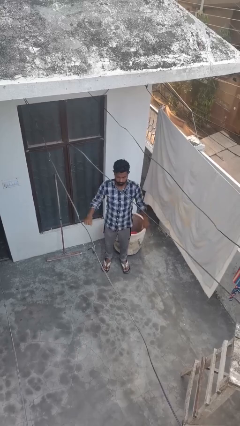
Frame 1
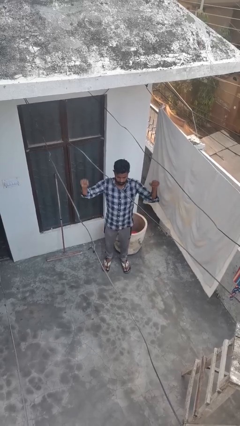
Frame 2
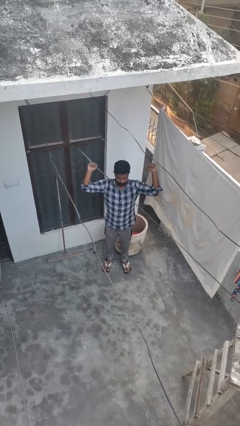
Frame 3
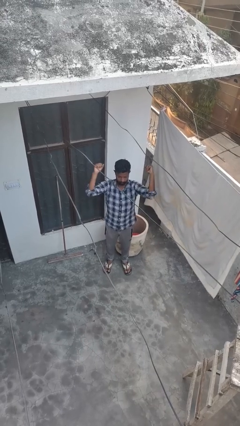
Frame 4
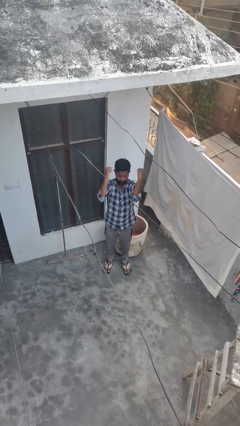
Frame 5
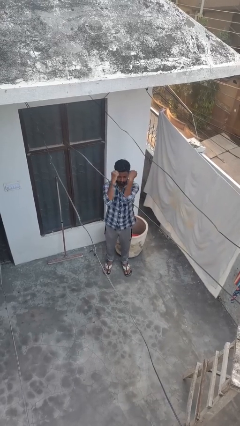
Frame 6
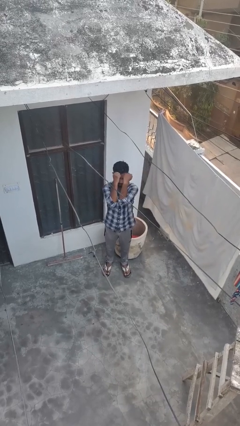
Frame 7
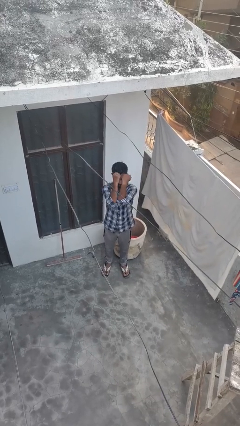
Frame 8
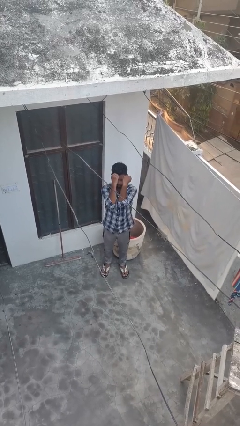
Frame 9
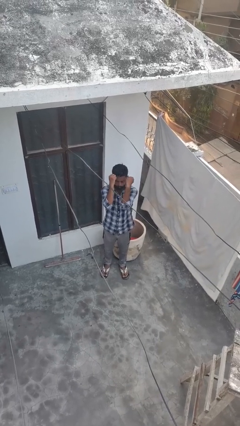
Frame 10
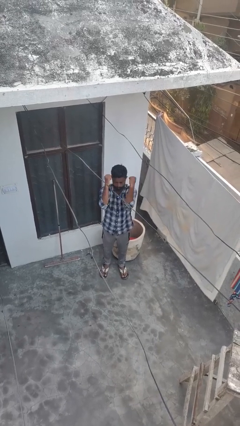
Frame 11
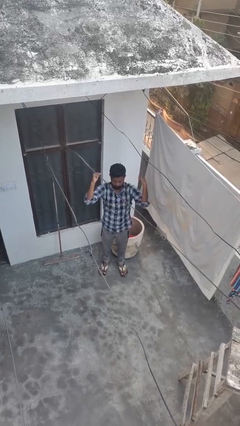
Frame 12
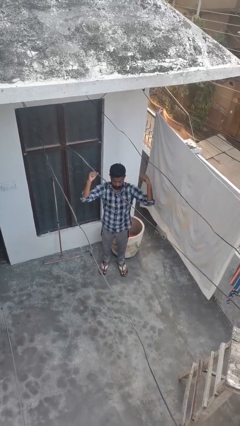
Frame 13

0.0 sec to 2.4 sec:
person gestures zoom in

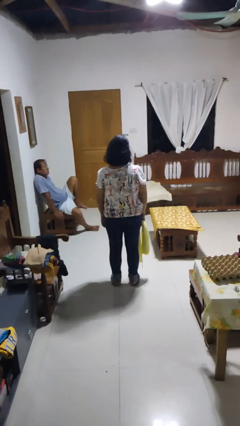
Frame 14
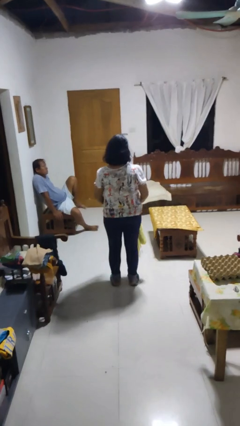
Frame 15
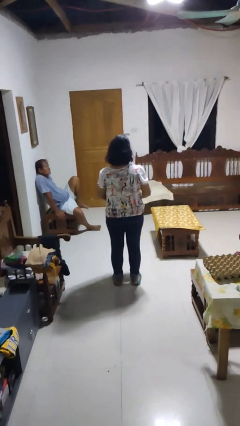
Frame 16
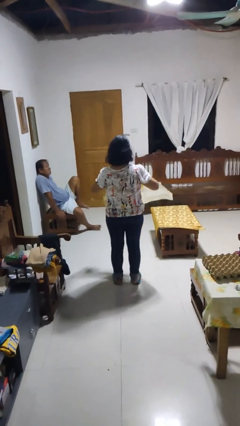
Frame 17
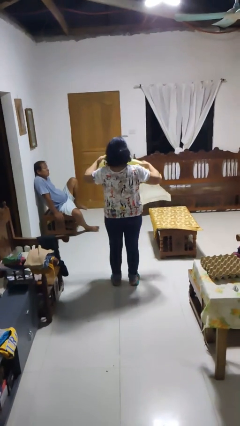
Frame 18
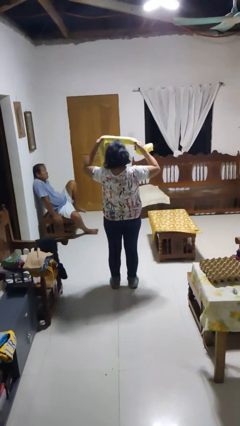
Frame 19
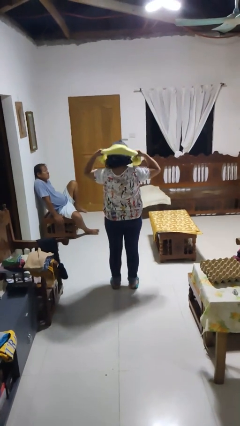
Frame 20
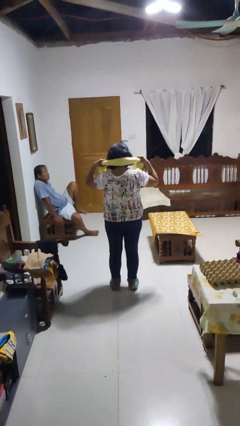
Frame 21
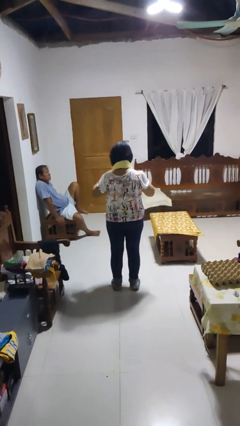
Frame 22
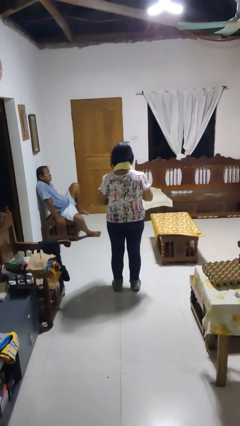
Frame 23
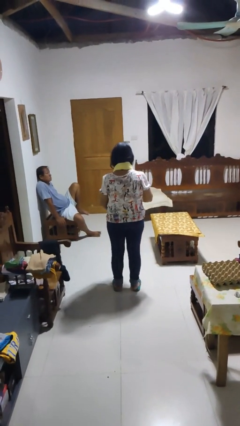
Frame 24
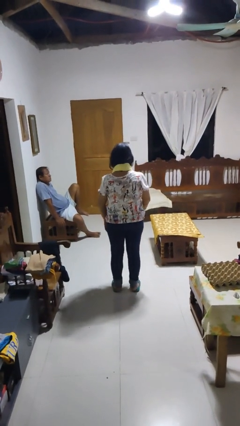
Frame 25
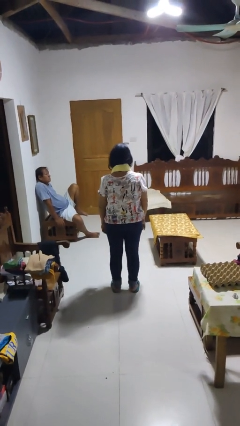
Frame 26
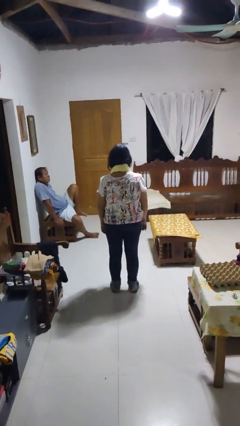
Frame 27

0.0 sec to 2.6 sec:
person puts on scarf

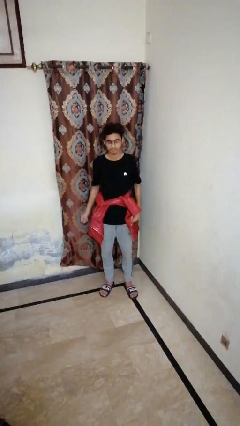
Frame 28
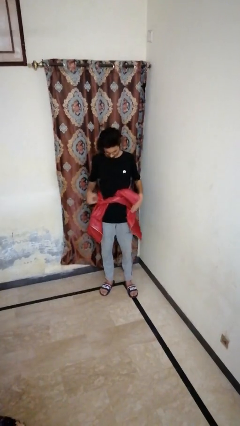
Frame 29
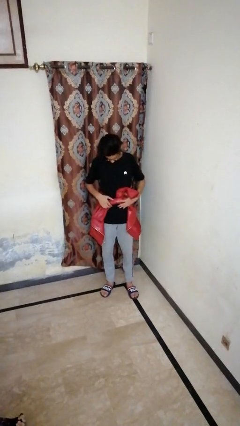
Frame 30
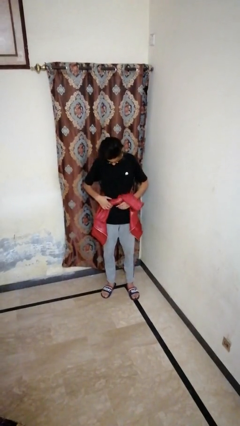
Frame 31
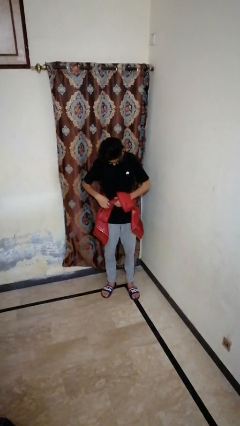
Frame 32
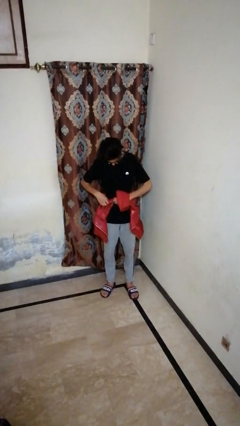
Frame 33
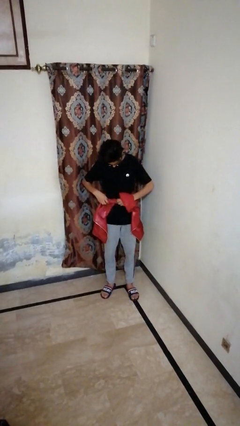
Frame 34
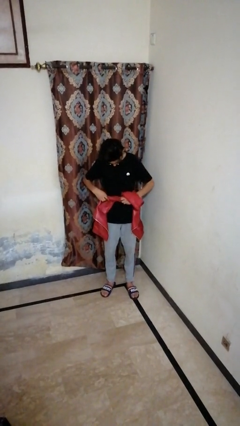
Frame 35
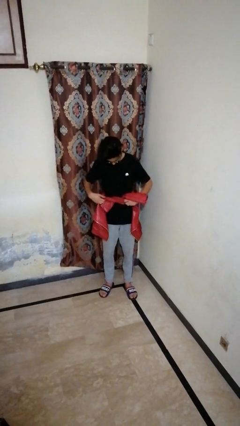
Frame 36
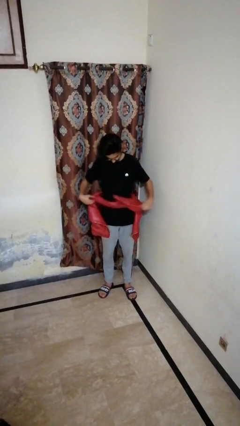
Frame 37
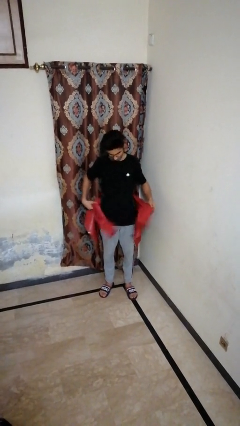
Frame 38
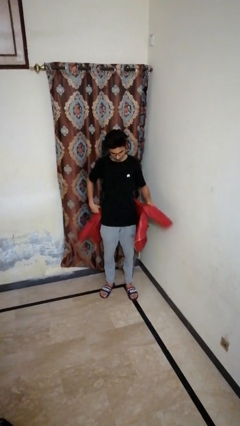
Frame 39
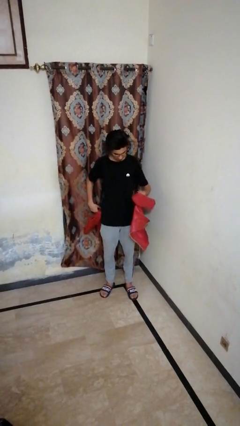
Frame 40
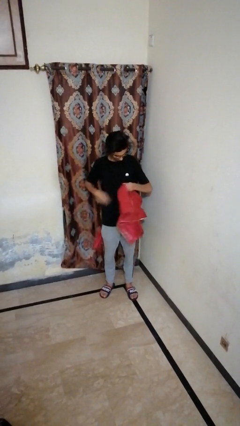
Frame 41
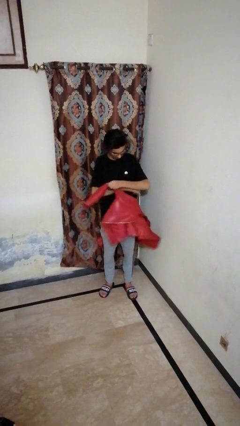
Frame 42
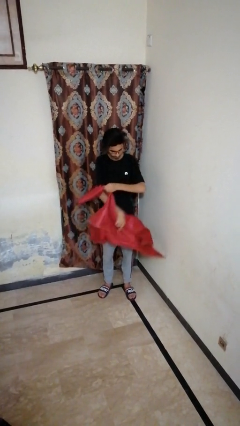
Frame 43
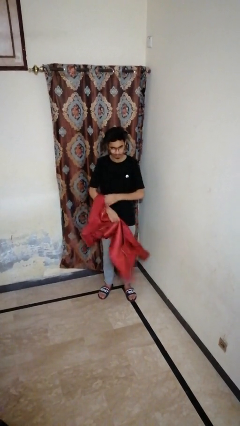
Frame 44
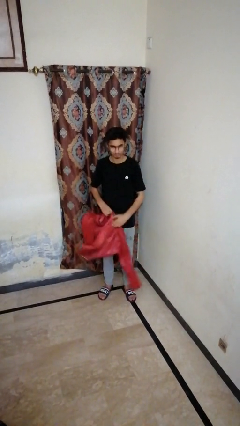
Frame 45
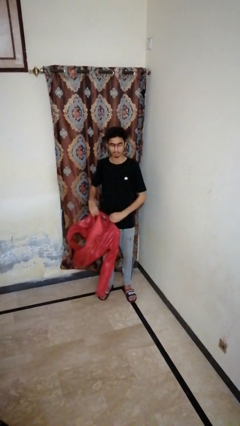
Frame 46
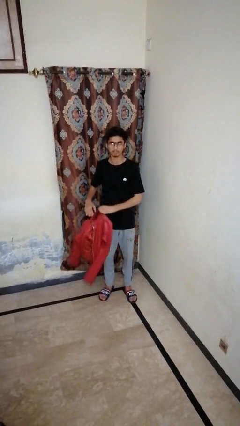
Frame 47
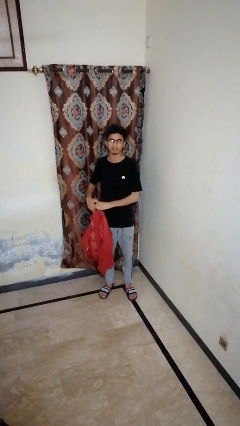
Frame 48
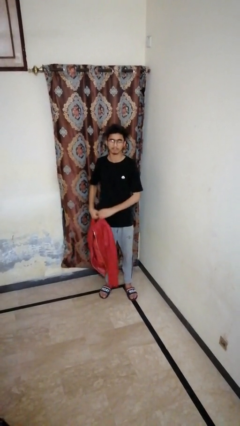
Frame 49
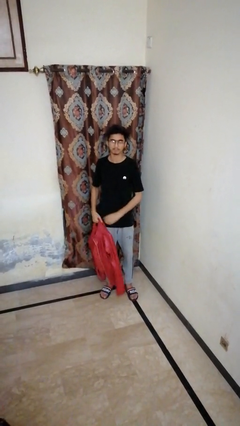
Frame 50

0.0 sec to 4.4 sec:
person unties jacket around waist

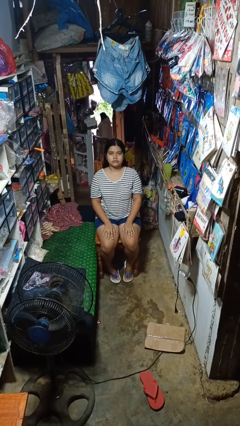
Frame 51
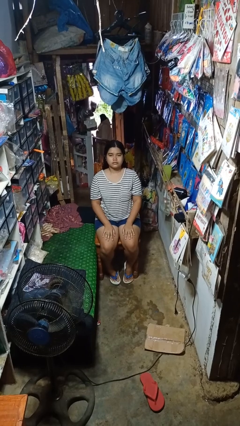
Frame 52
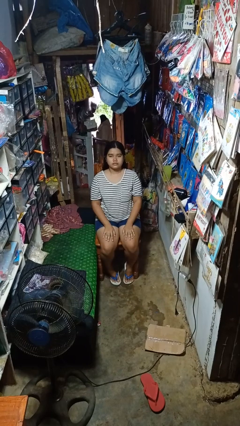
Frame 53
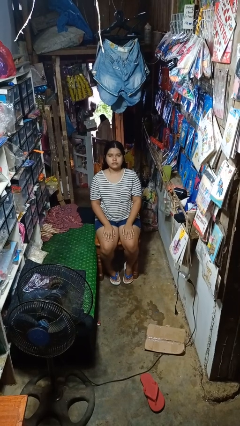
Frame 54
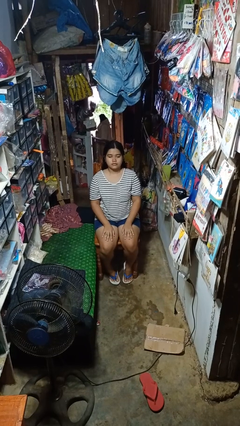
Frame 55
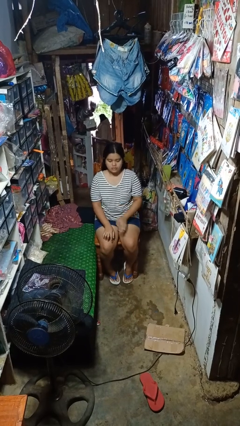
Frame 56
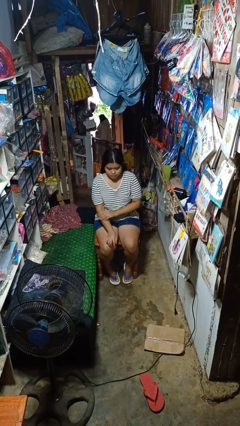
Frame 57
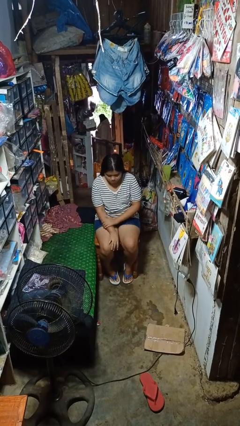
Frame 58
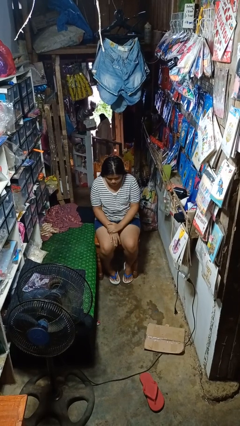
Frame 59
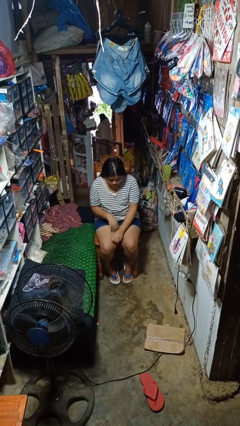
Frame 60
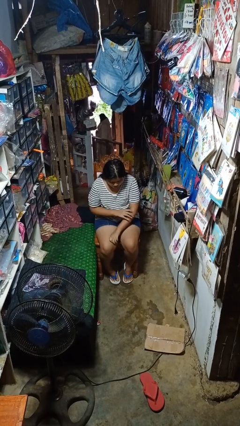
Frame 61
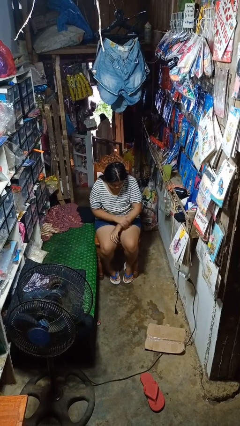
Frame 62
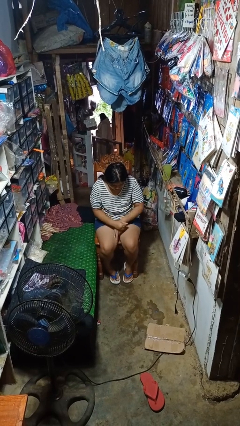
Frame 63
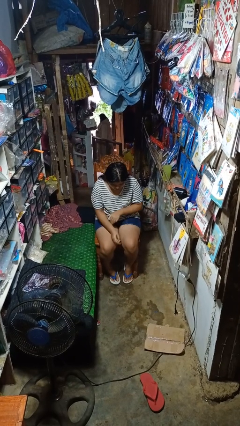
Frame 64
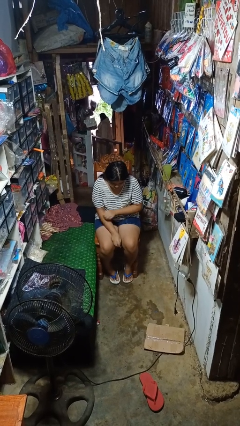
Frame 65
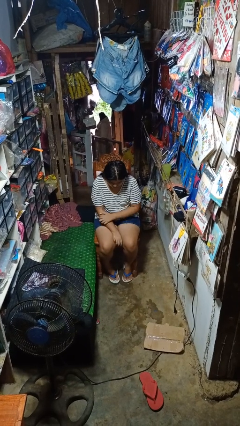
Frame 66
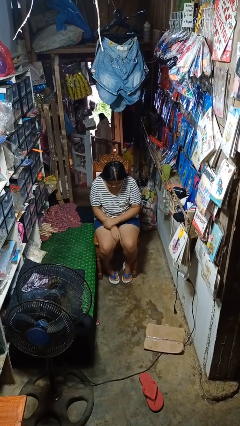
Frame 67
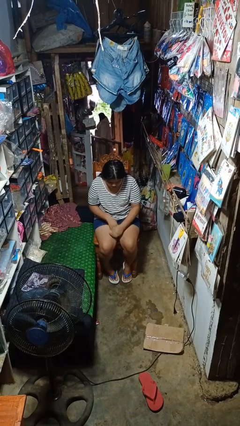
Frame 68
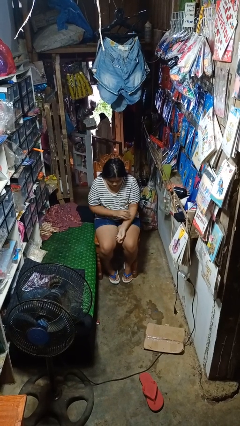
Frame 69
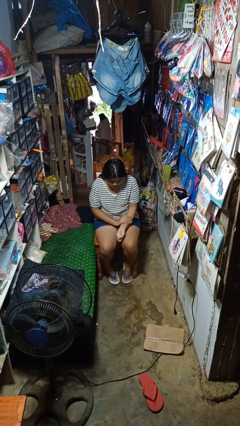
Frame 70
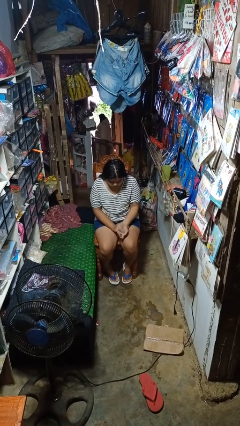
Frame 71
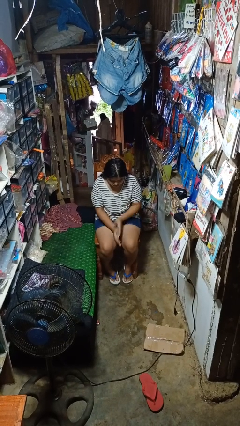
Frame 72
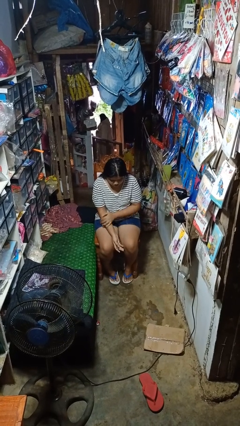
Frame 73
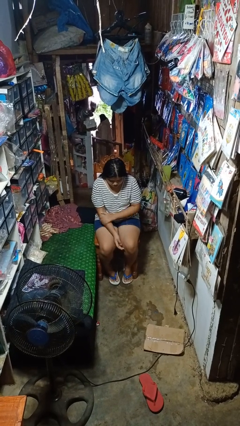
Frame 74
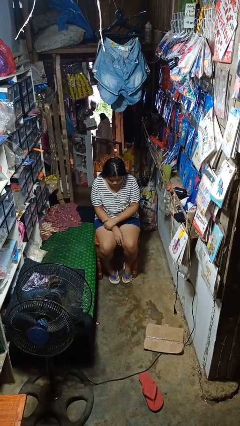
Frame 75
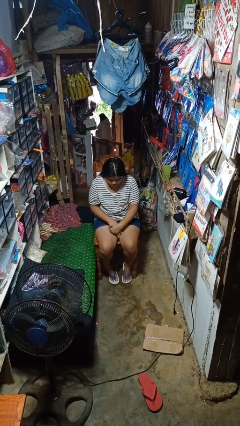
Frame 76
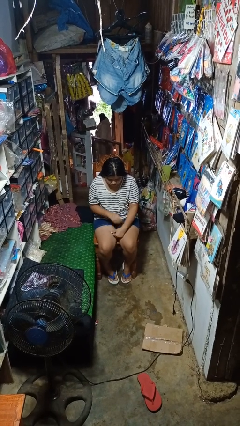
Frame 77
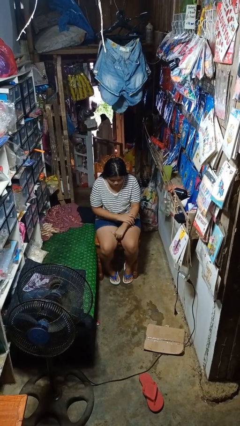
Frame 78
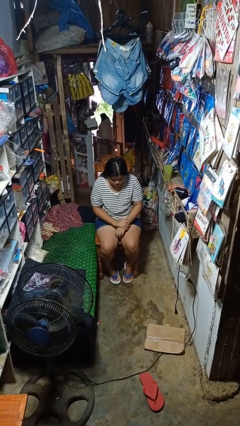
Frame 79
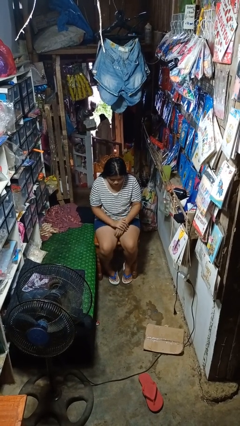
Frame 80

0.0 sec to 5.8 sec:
person looks at hands in lap

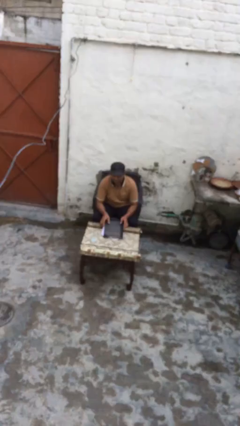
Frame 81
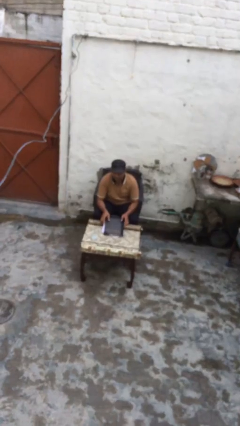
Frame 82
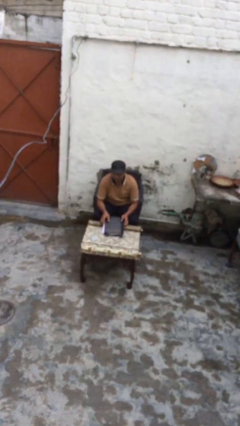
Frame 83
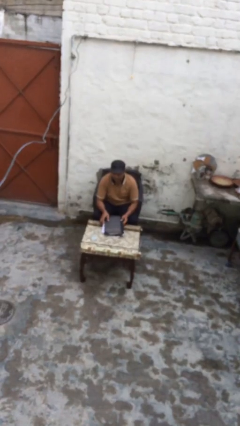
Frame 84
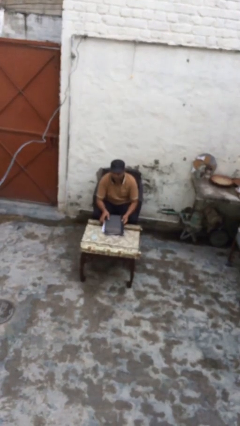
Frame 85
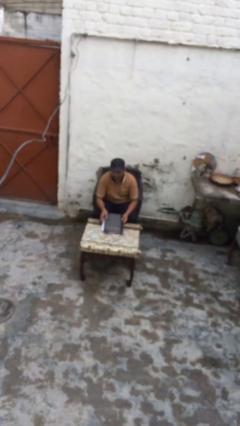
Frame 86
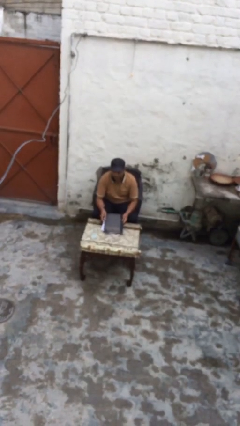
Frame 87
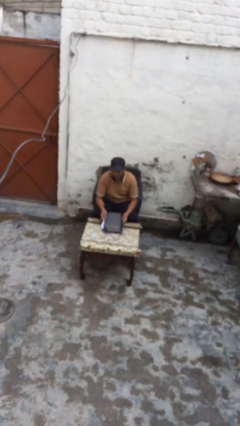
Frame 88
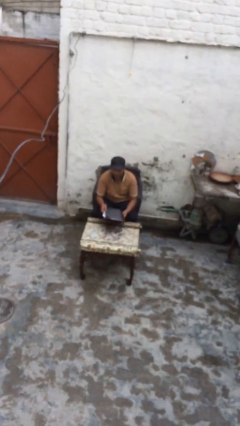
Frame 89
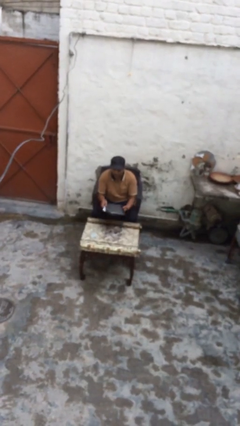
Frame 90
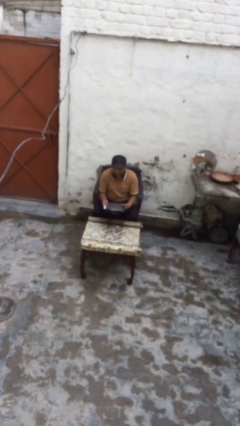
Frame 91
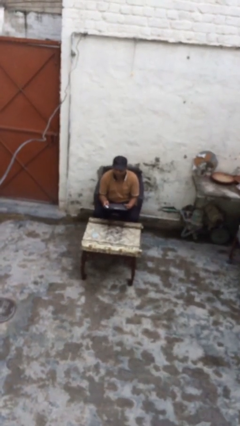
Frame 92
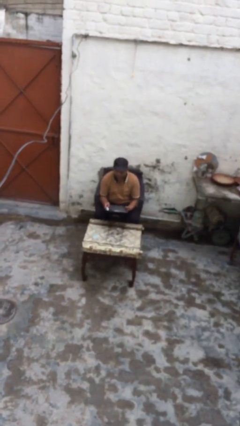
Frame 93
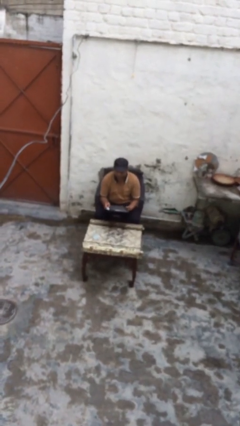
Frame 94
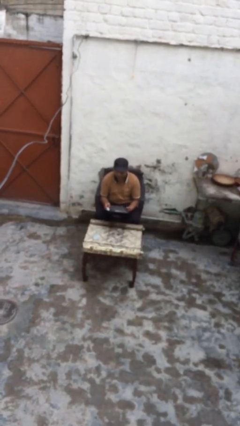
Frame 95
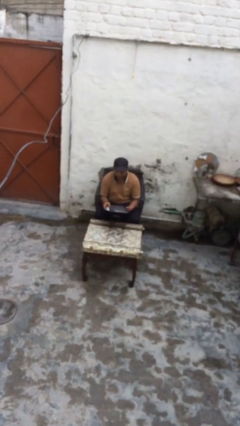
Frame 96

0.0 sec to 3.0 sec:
person picks up object from table
